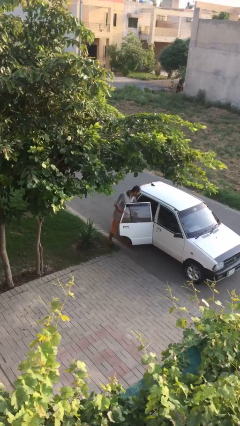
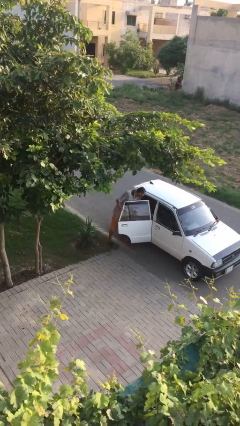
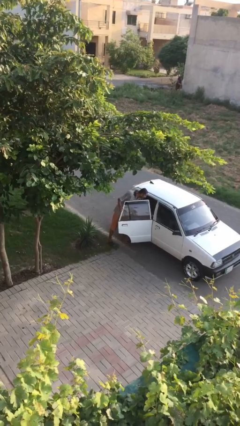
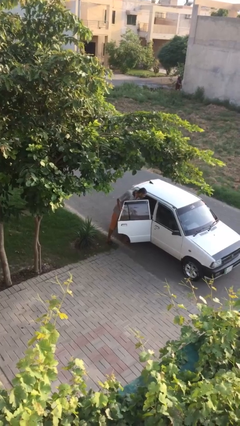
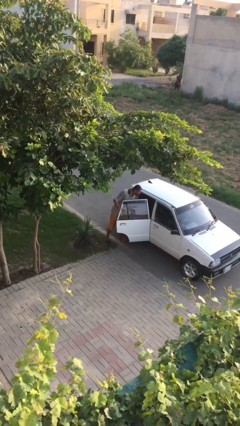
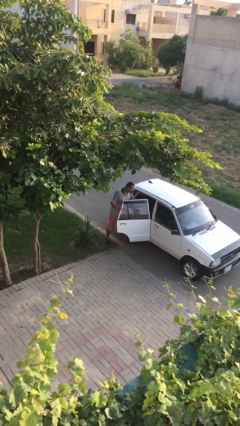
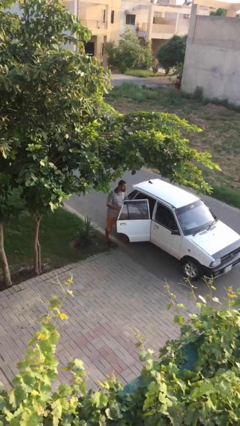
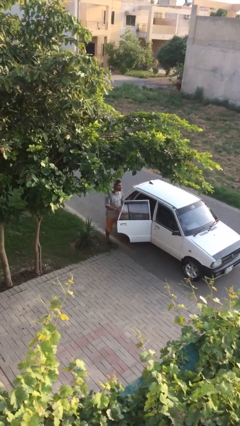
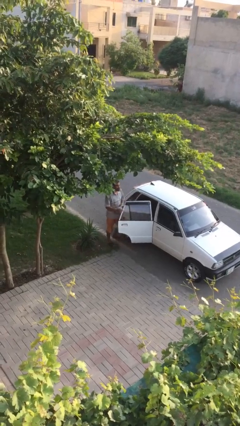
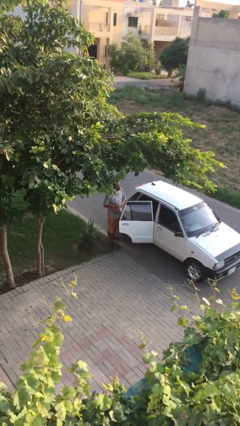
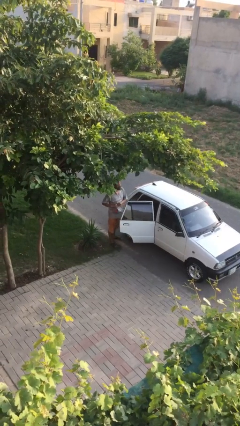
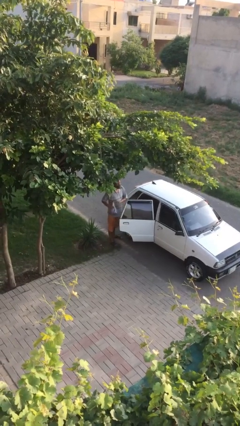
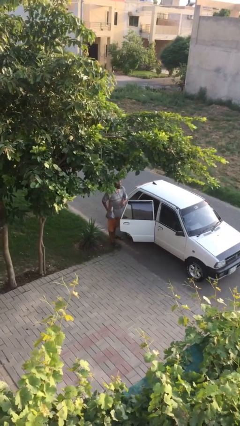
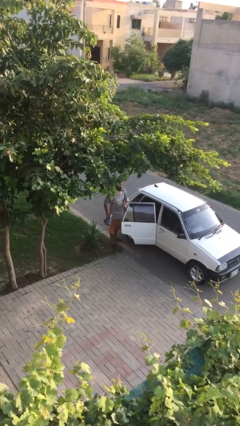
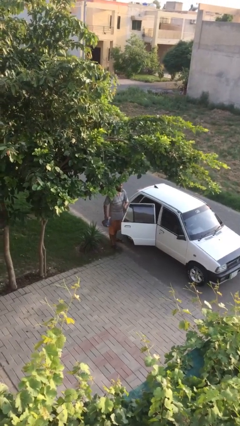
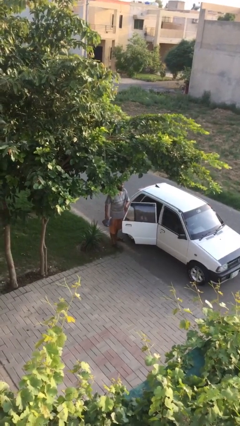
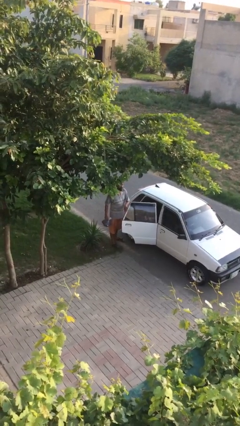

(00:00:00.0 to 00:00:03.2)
person unloads car

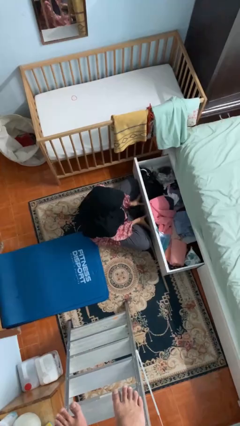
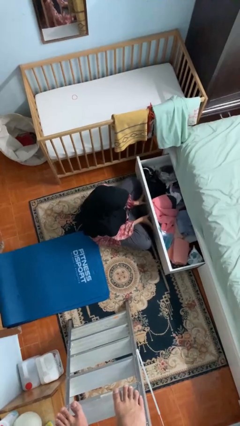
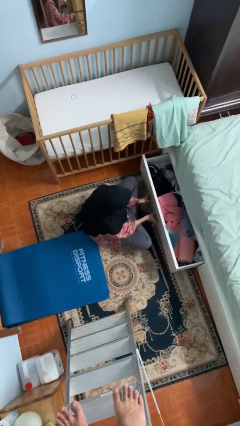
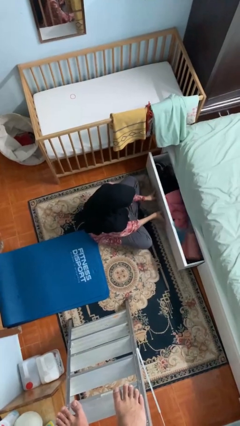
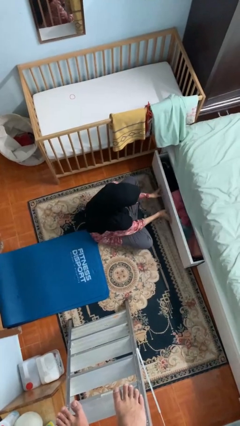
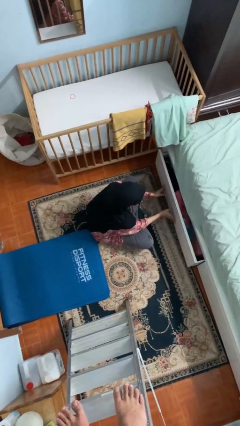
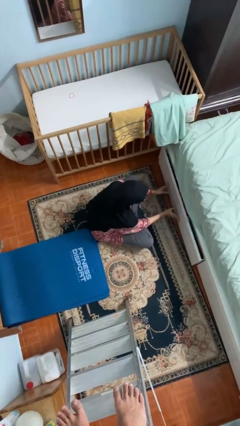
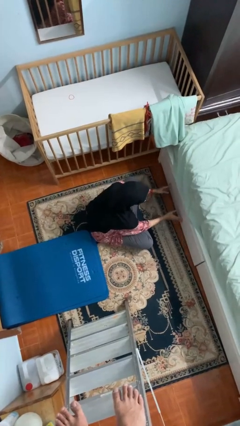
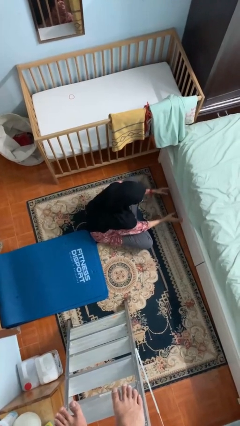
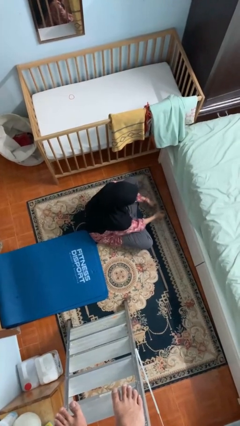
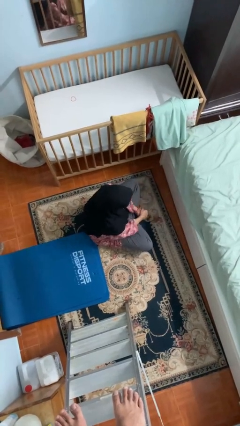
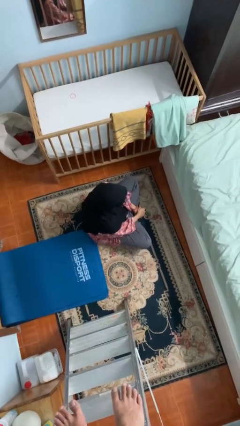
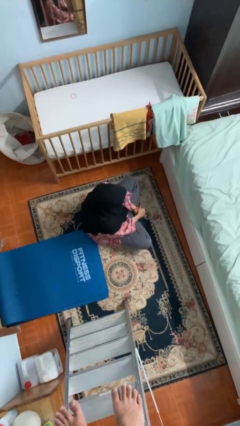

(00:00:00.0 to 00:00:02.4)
person closes dresser drawer

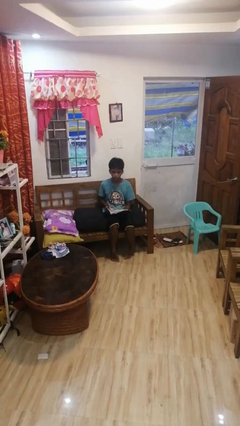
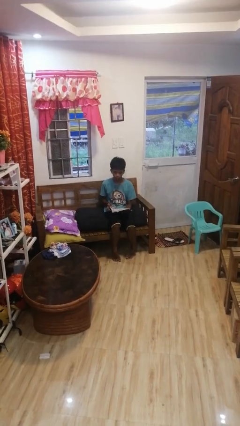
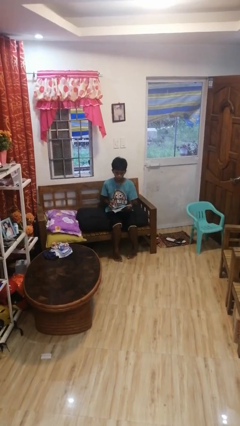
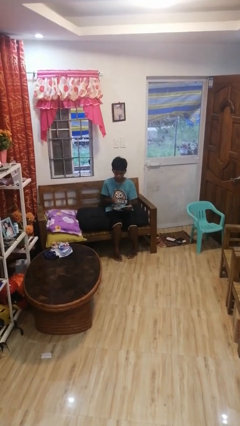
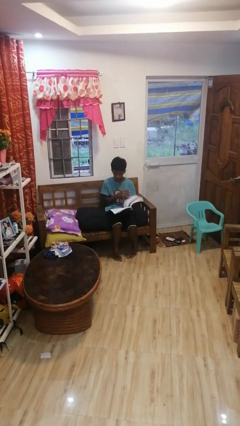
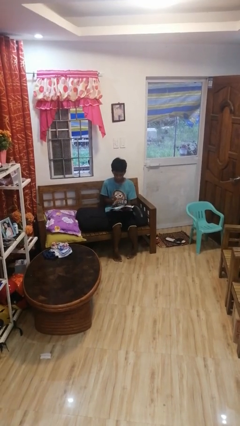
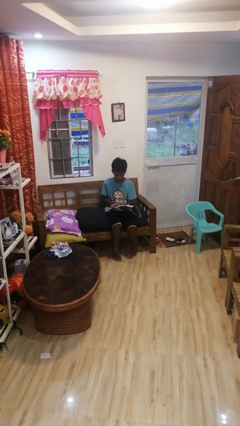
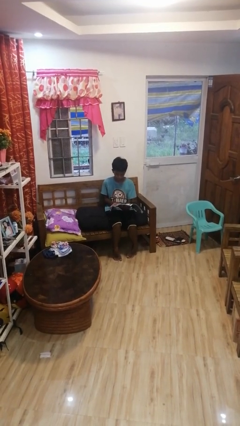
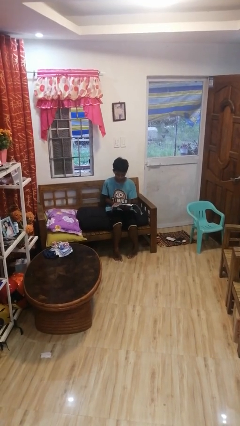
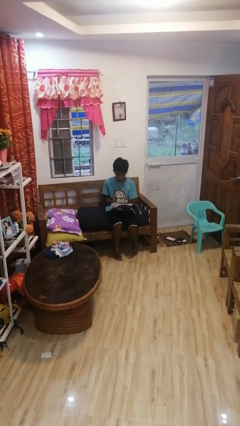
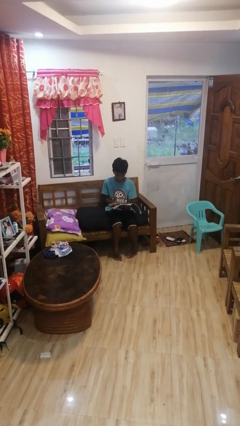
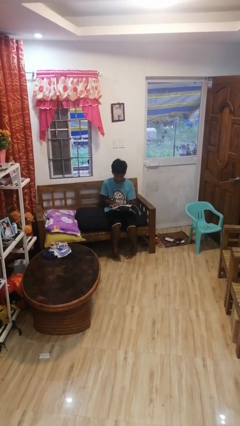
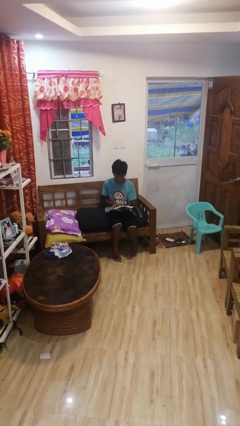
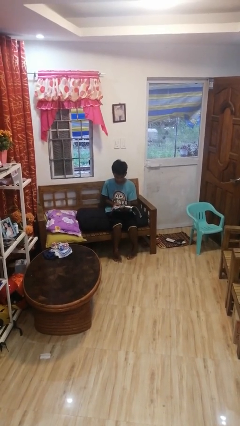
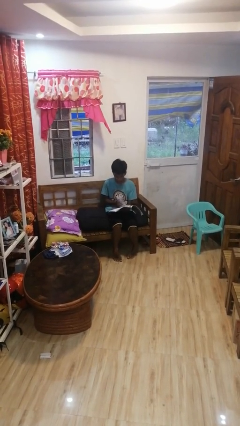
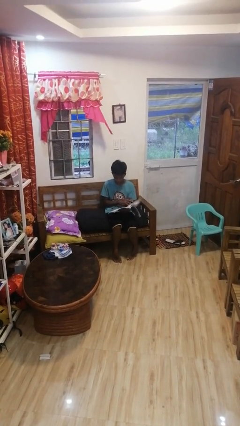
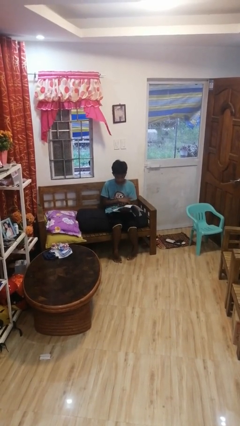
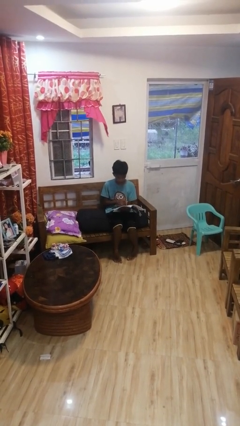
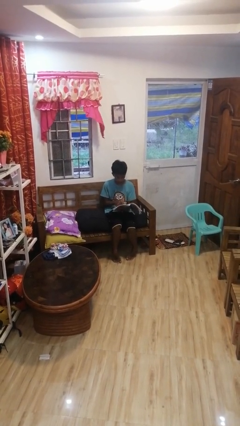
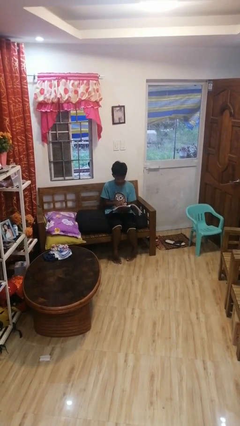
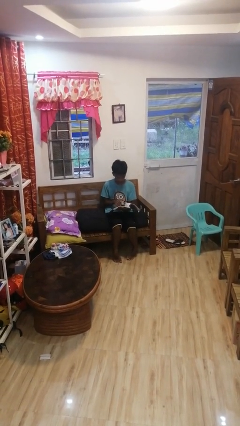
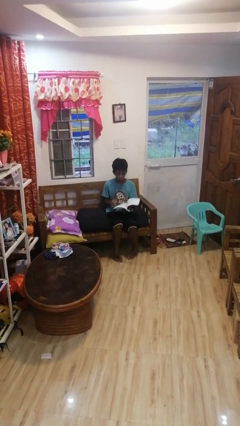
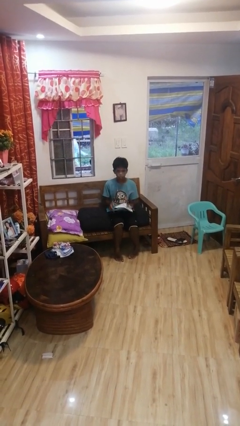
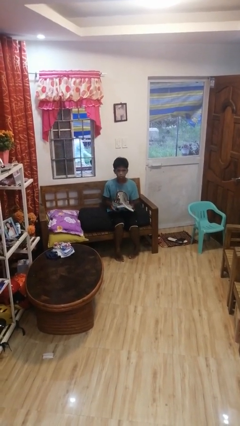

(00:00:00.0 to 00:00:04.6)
person reads magazine

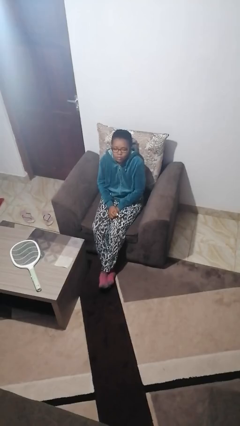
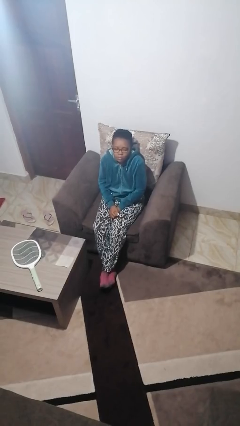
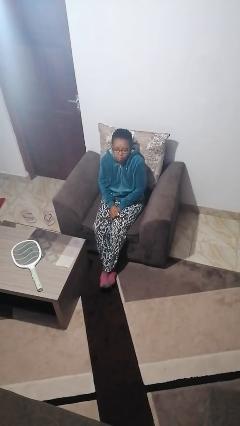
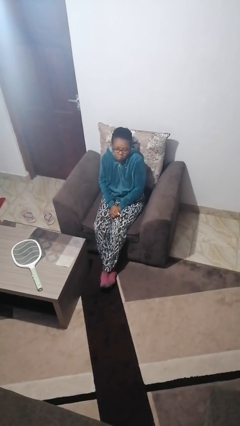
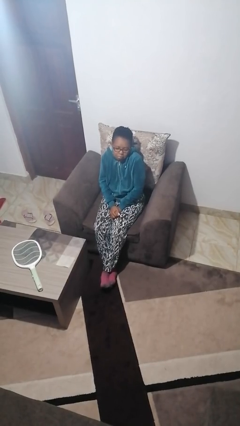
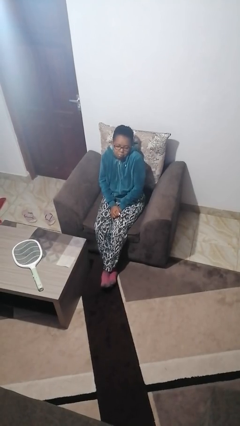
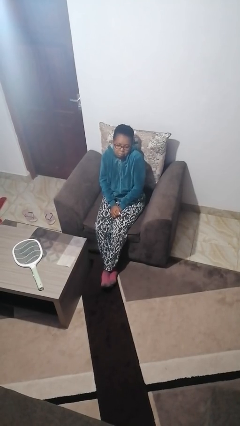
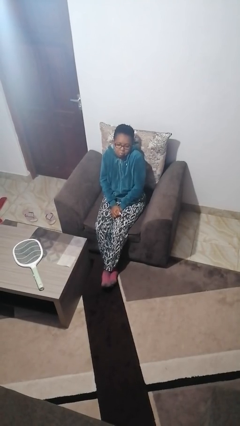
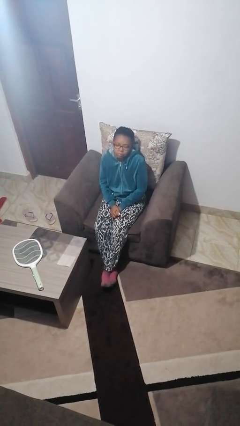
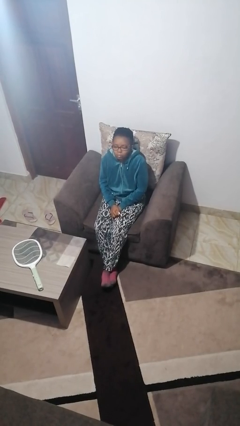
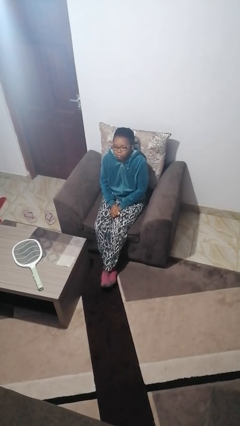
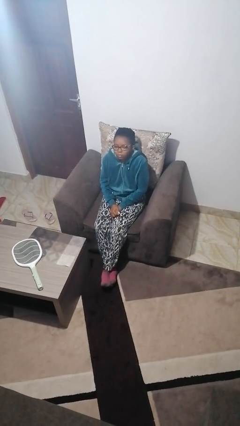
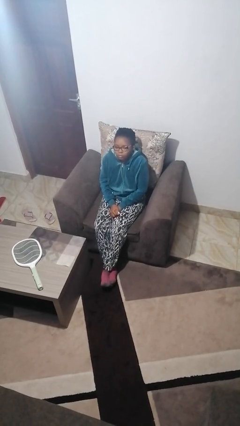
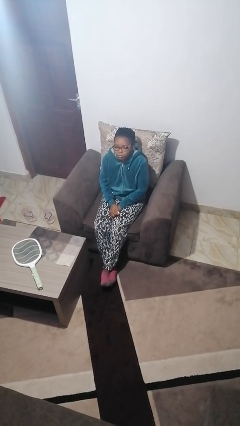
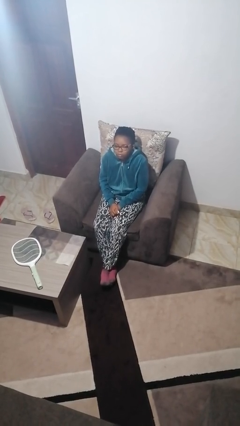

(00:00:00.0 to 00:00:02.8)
person shrugs

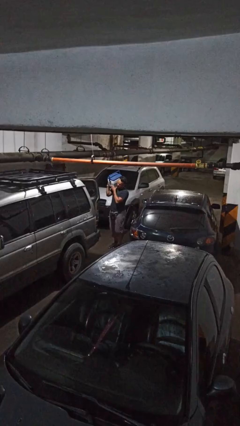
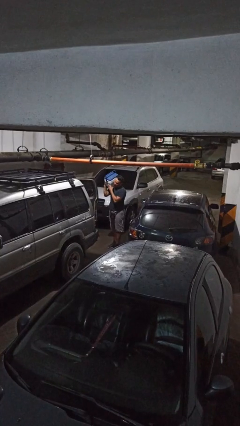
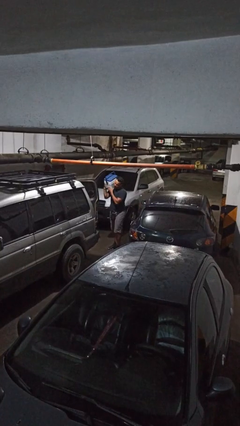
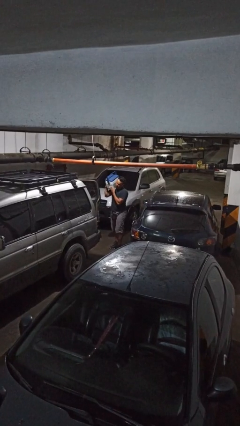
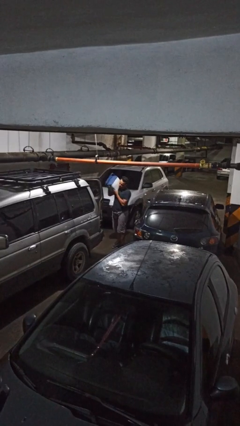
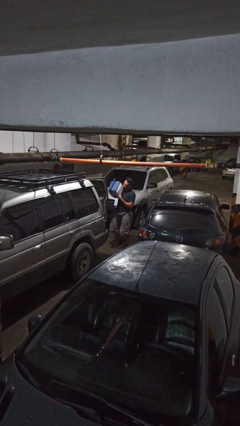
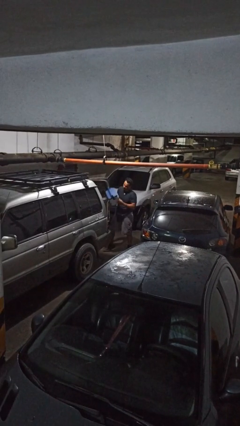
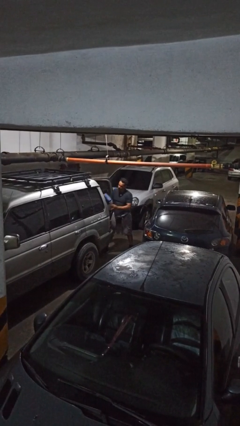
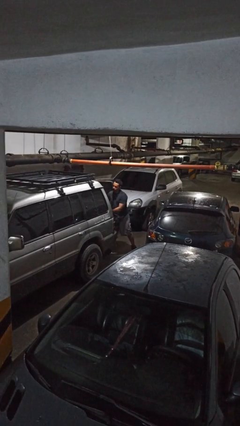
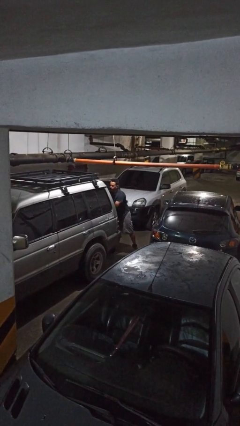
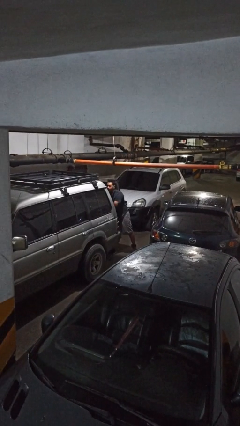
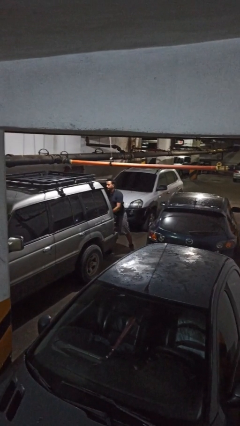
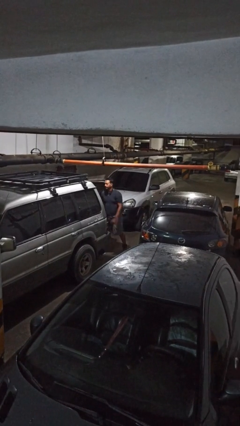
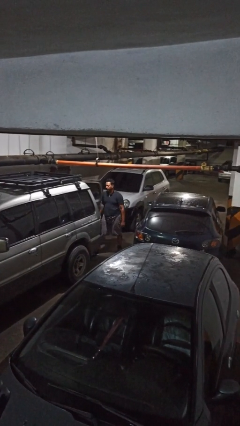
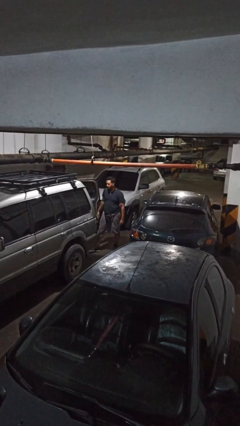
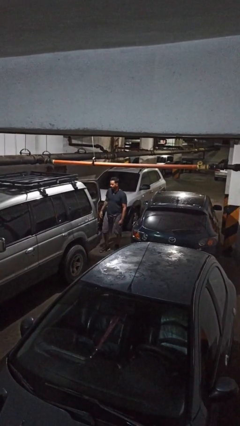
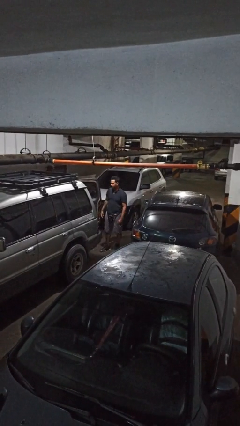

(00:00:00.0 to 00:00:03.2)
person loads car

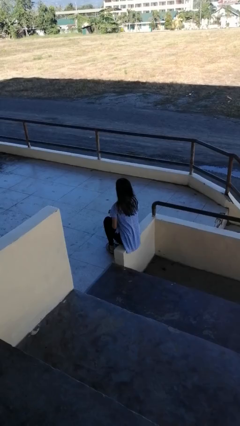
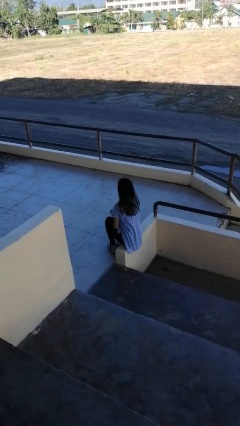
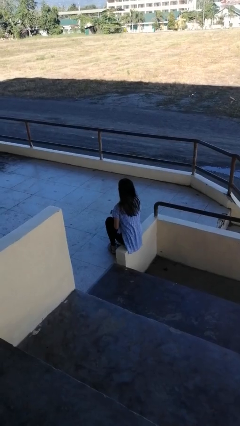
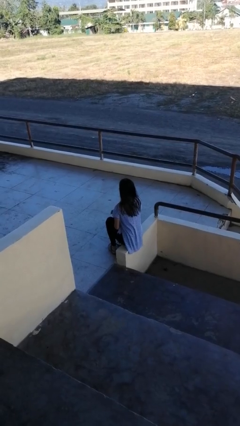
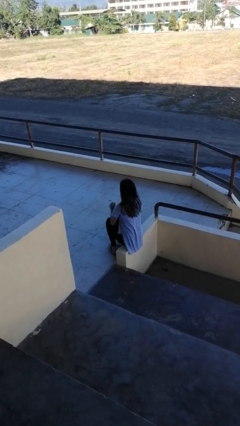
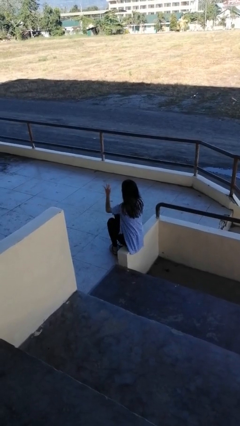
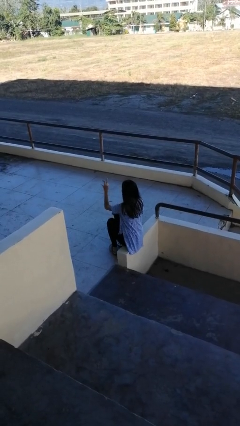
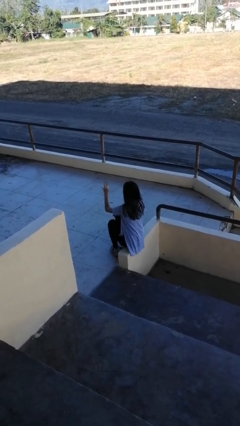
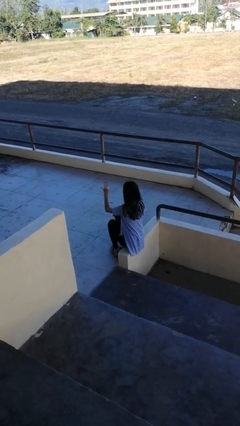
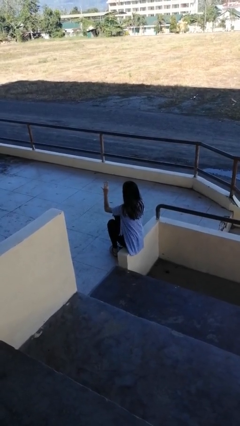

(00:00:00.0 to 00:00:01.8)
person gestures number three
